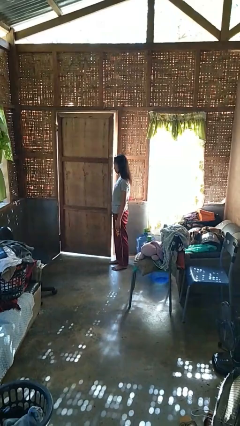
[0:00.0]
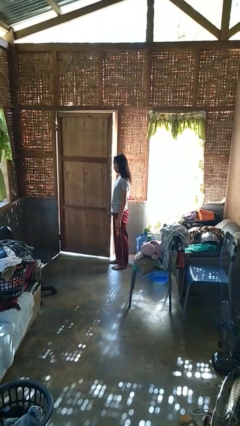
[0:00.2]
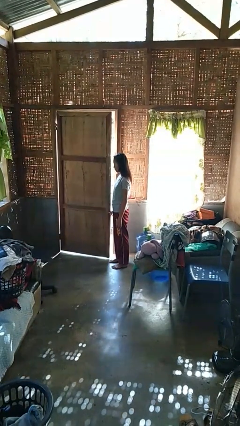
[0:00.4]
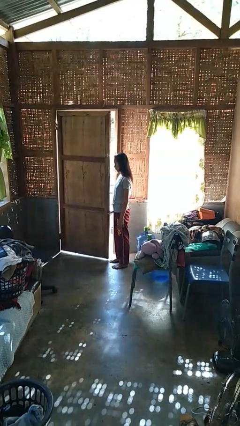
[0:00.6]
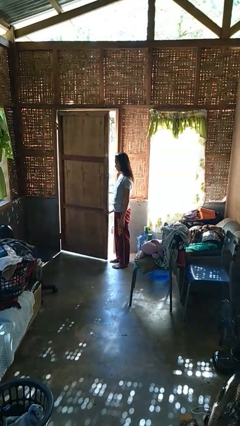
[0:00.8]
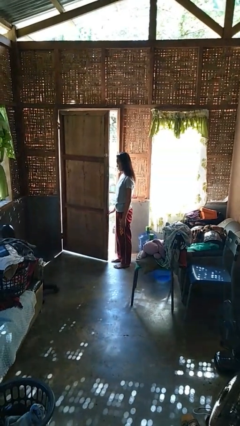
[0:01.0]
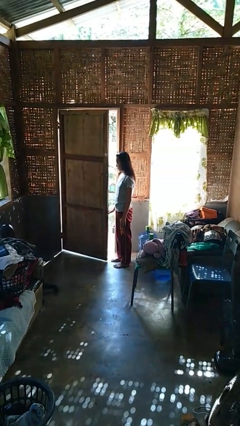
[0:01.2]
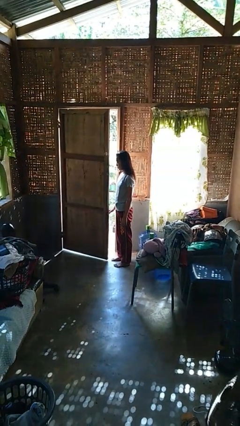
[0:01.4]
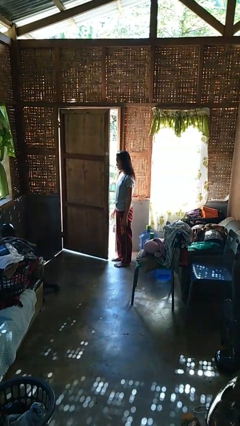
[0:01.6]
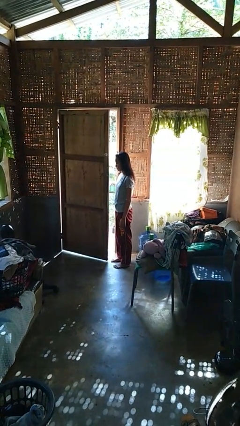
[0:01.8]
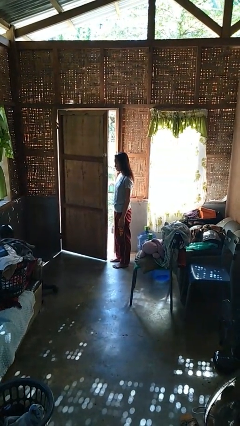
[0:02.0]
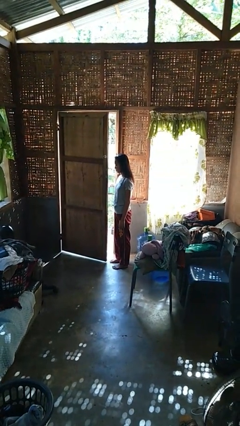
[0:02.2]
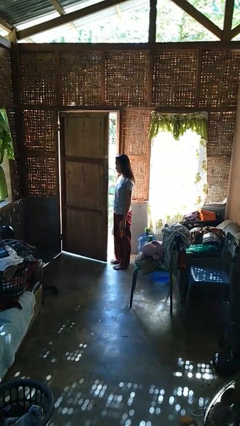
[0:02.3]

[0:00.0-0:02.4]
person opens facility door

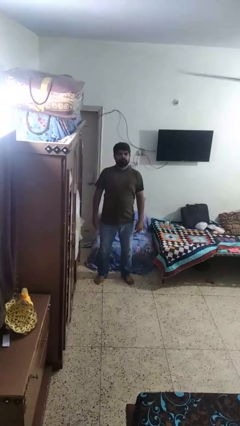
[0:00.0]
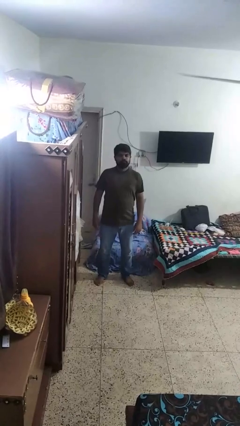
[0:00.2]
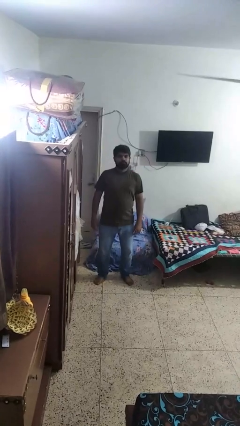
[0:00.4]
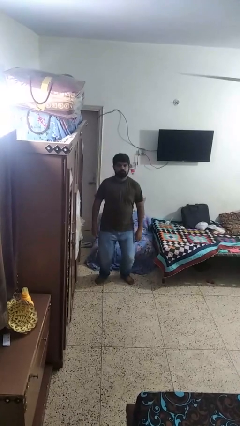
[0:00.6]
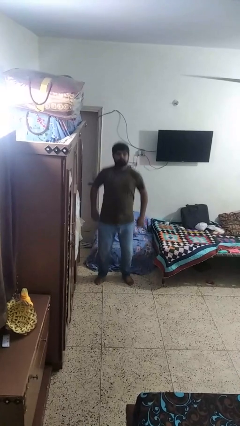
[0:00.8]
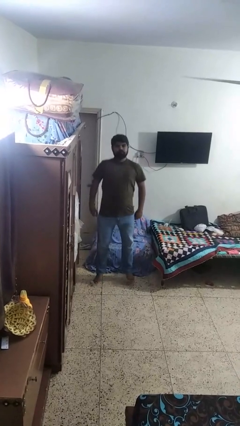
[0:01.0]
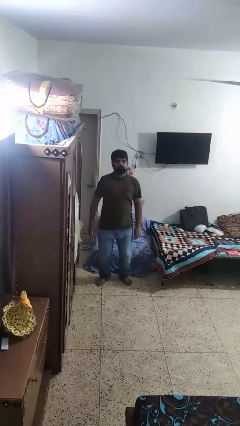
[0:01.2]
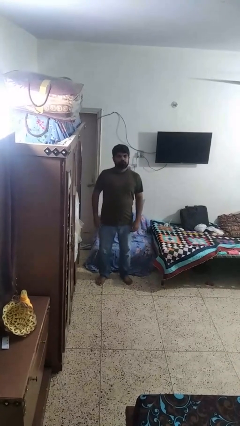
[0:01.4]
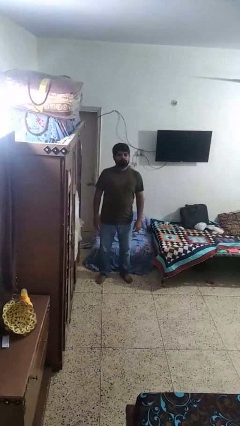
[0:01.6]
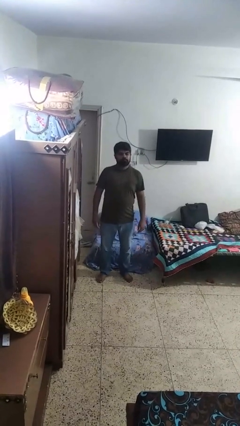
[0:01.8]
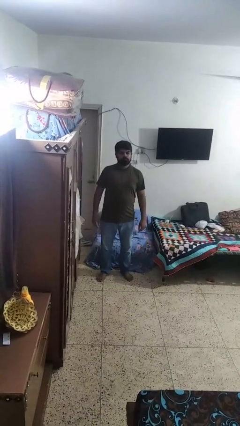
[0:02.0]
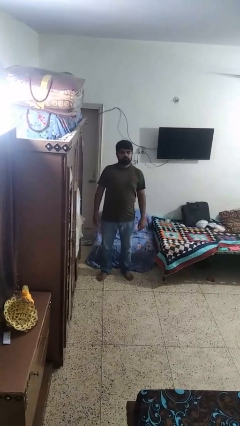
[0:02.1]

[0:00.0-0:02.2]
person jumps

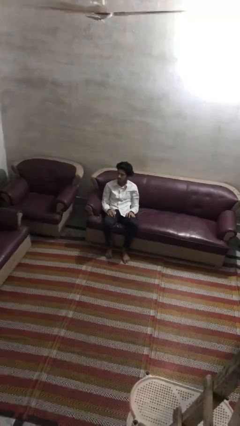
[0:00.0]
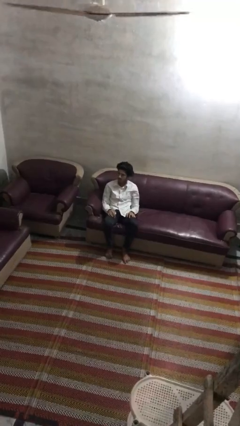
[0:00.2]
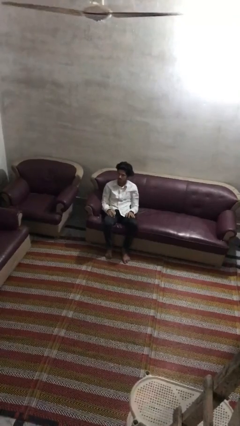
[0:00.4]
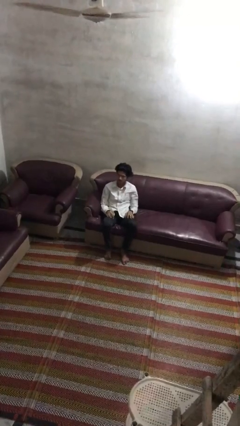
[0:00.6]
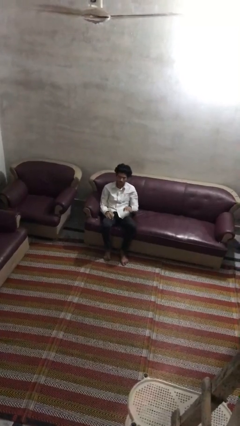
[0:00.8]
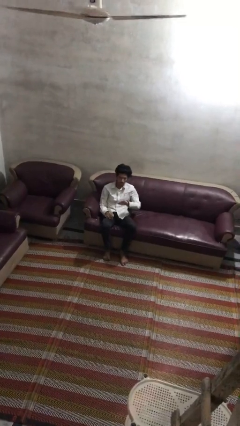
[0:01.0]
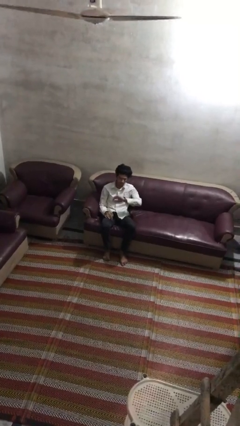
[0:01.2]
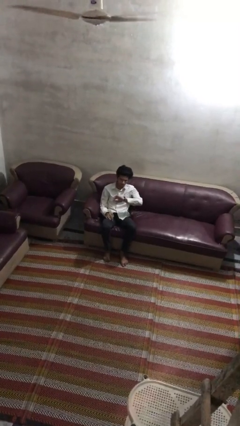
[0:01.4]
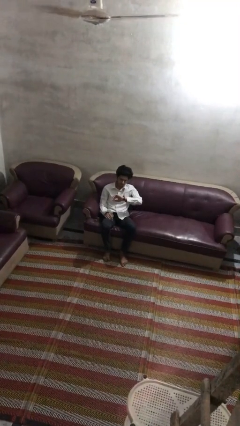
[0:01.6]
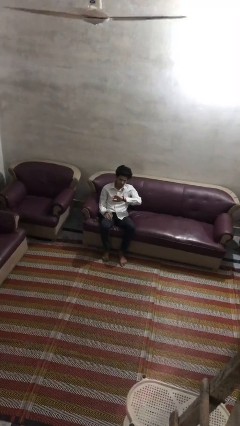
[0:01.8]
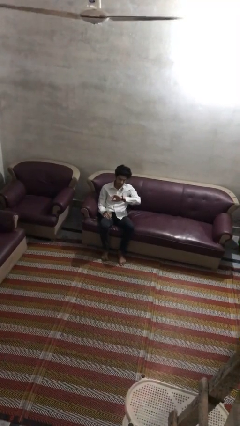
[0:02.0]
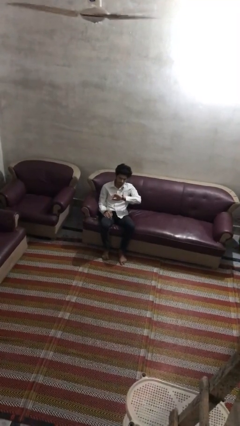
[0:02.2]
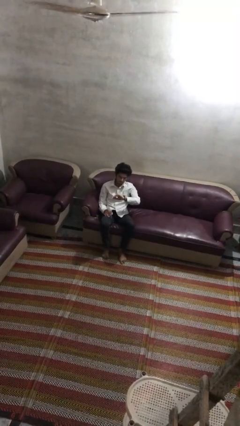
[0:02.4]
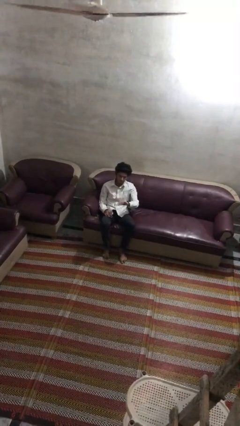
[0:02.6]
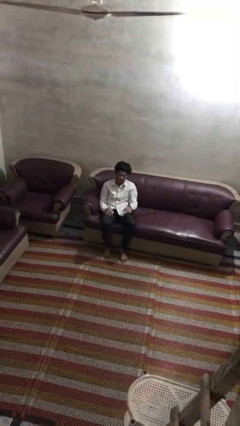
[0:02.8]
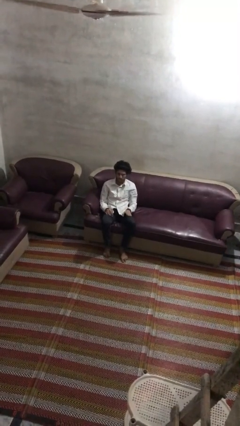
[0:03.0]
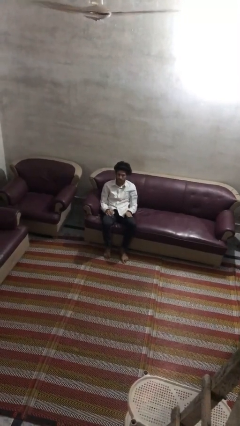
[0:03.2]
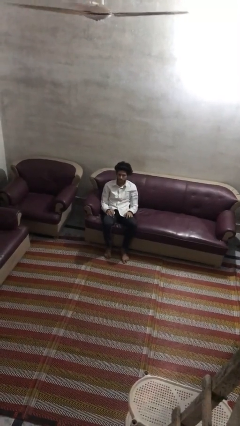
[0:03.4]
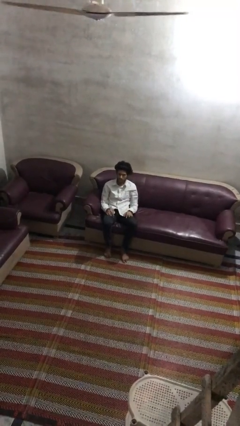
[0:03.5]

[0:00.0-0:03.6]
person looks at wristwatch

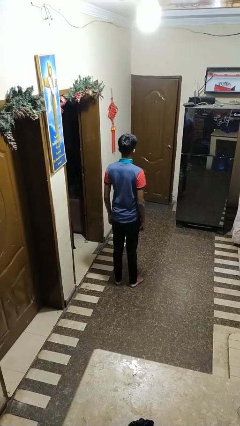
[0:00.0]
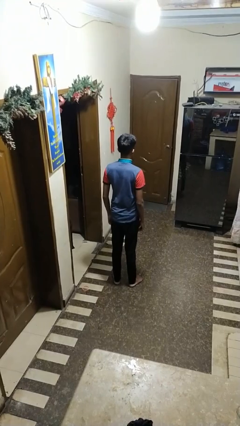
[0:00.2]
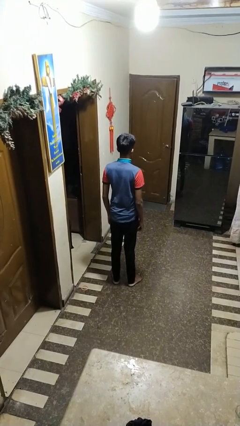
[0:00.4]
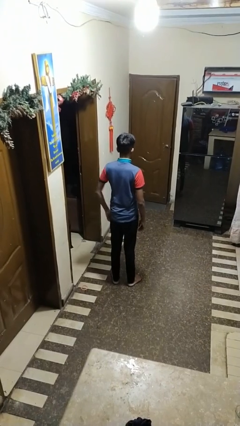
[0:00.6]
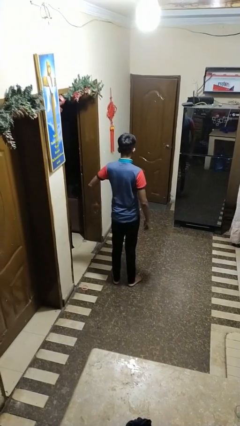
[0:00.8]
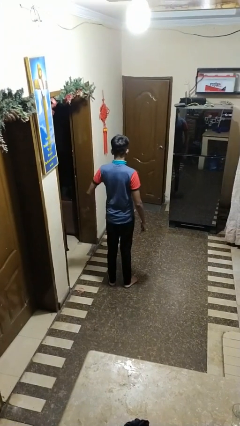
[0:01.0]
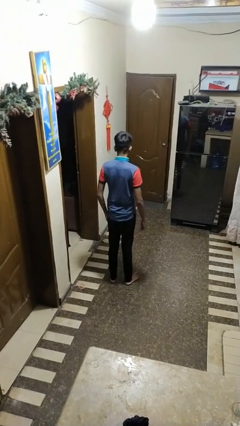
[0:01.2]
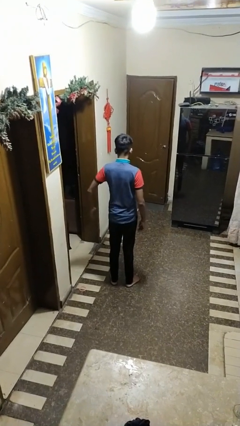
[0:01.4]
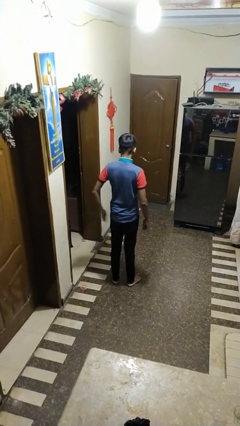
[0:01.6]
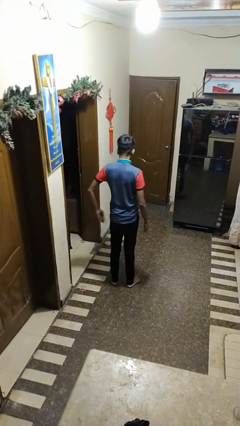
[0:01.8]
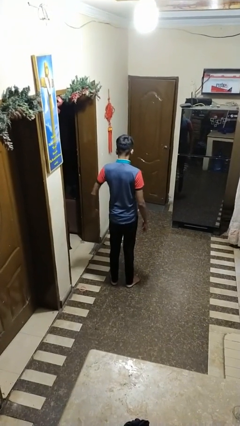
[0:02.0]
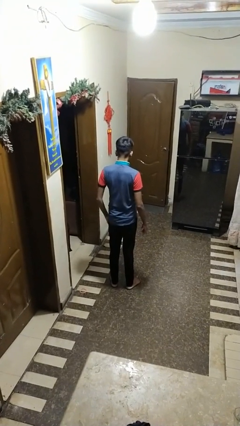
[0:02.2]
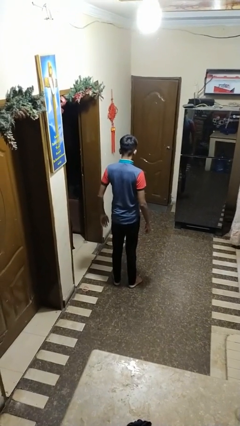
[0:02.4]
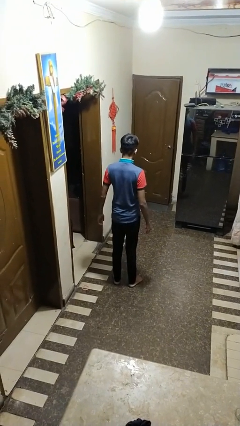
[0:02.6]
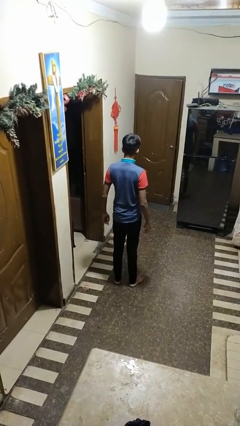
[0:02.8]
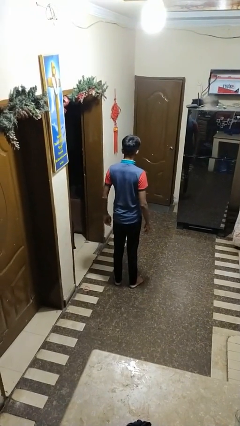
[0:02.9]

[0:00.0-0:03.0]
person slaps hands on thighs

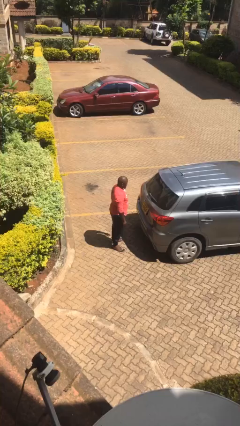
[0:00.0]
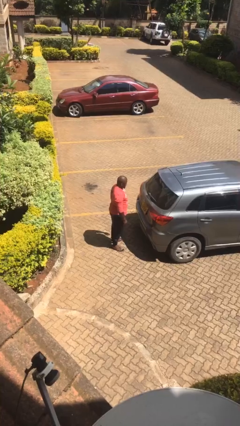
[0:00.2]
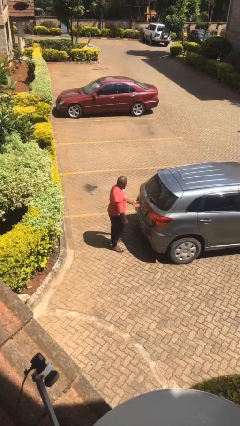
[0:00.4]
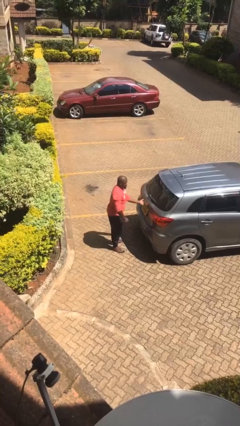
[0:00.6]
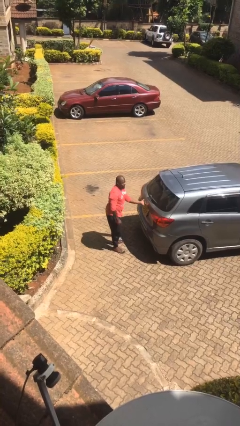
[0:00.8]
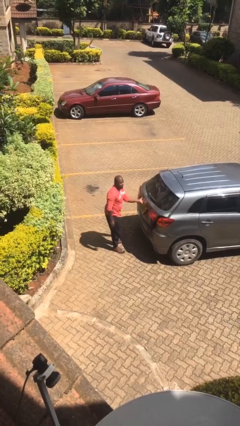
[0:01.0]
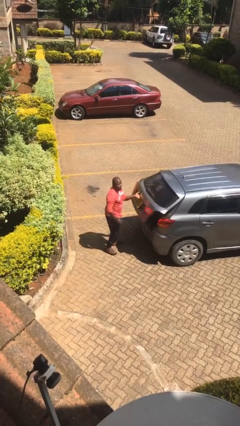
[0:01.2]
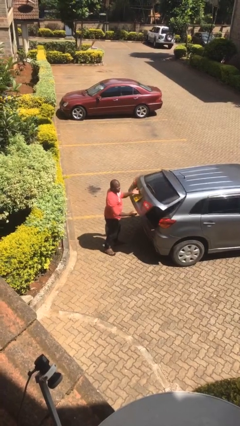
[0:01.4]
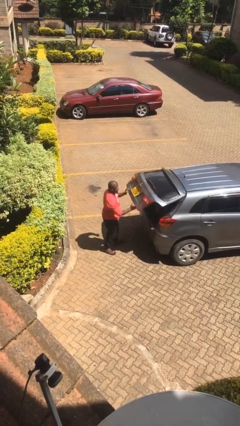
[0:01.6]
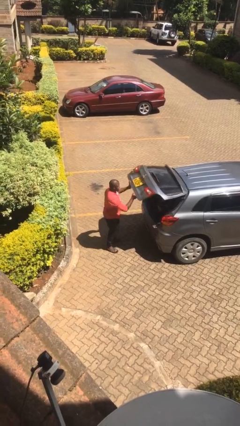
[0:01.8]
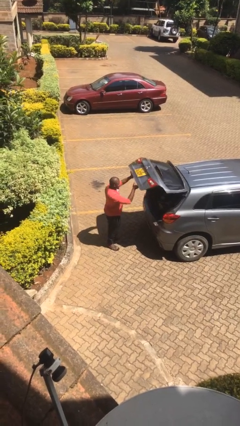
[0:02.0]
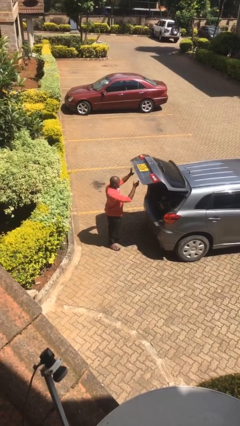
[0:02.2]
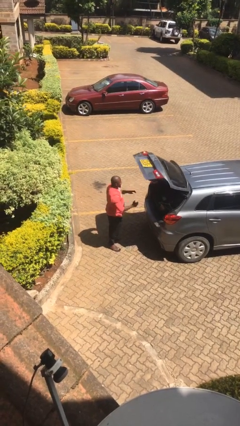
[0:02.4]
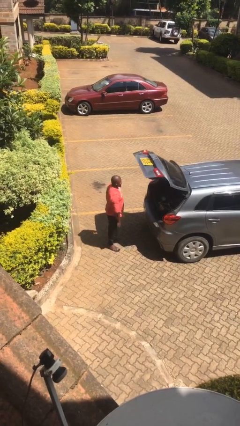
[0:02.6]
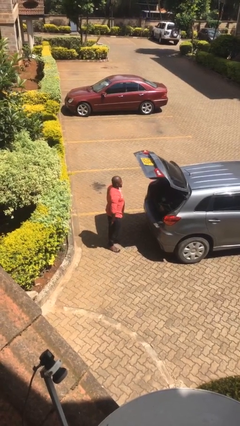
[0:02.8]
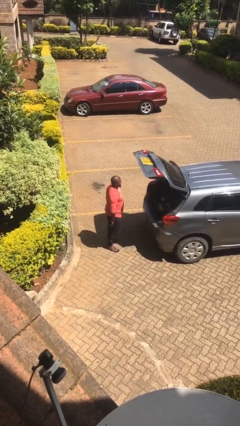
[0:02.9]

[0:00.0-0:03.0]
person opens car trunk

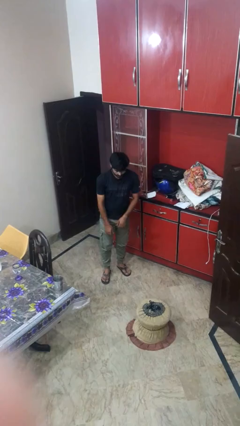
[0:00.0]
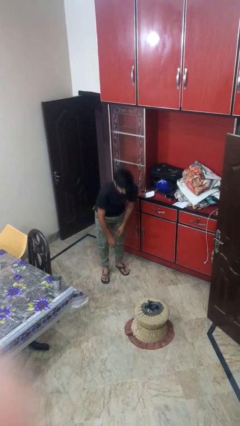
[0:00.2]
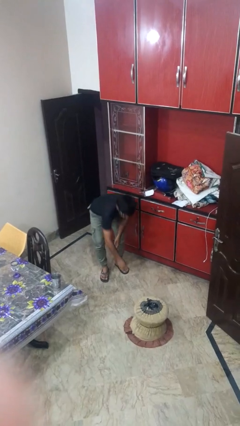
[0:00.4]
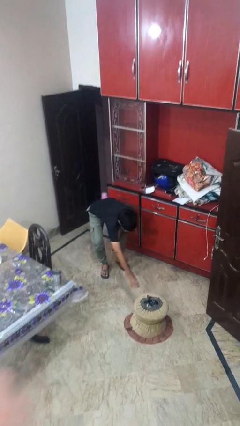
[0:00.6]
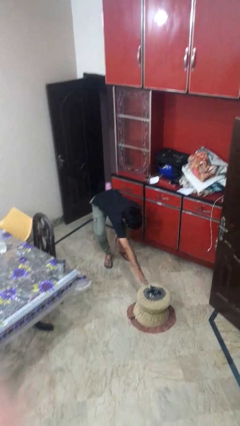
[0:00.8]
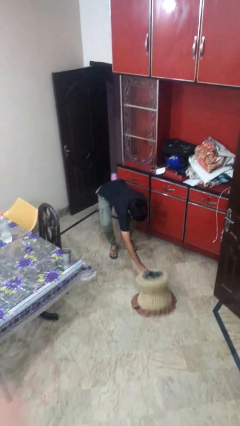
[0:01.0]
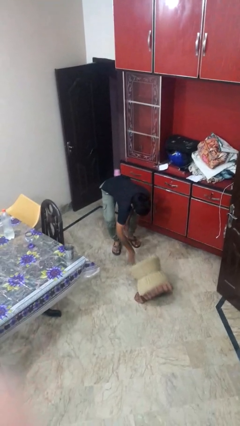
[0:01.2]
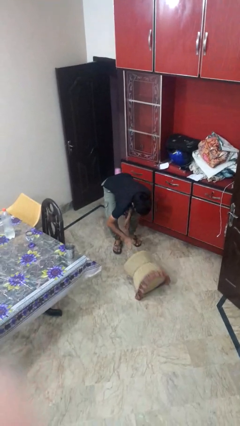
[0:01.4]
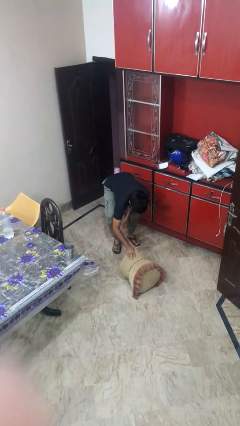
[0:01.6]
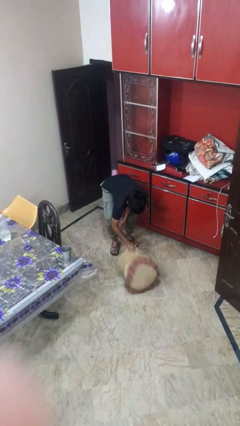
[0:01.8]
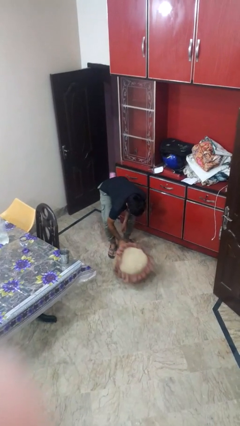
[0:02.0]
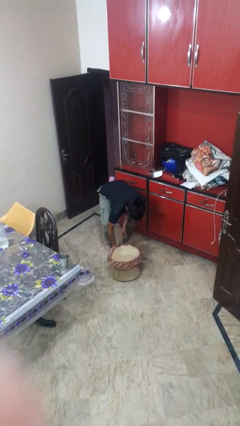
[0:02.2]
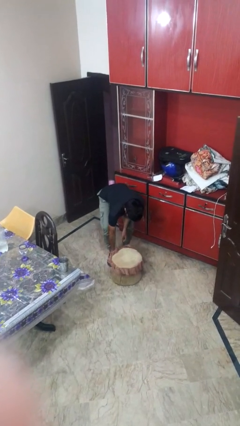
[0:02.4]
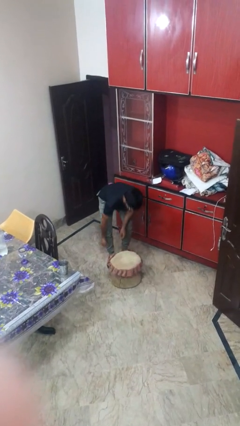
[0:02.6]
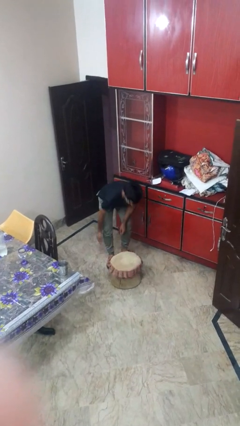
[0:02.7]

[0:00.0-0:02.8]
person sets upright furniture
